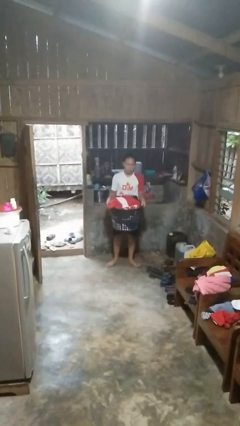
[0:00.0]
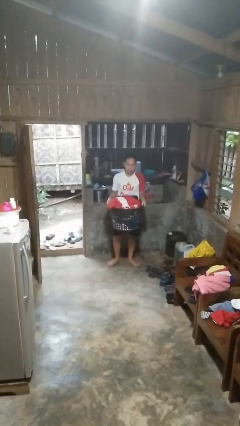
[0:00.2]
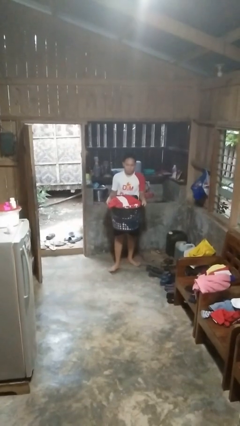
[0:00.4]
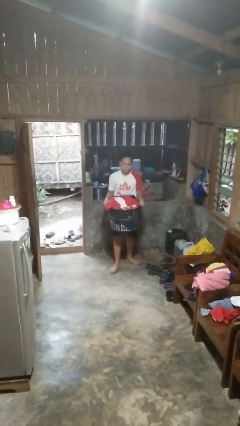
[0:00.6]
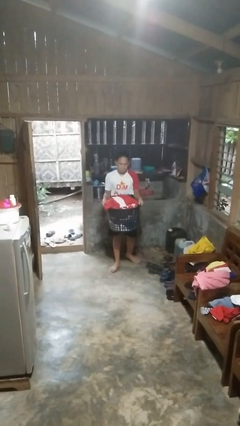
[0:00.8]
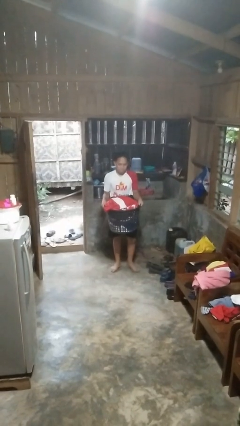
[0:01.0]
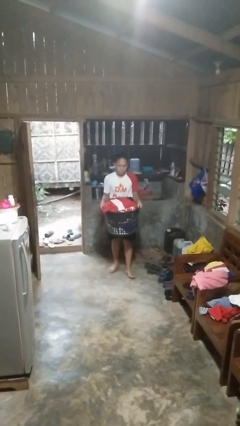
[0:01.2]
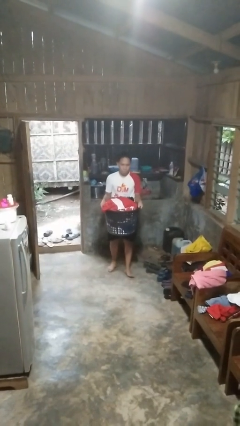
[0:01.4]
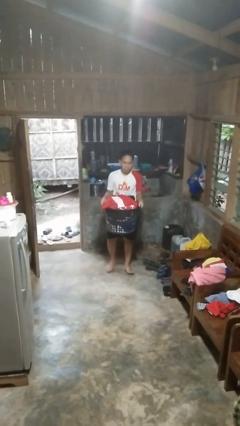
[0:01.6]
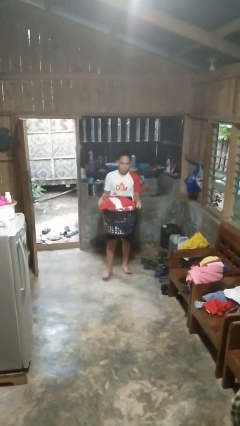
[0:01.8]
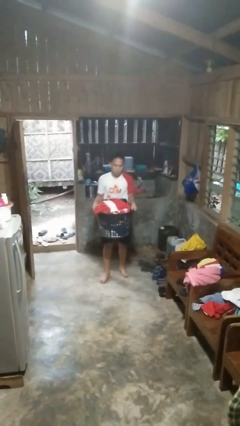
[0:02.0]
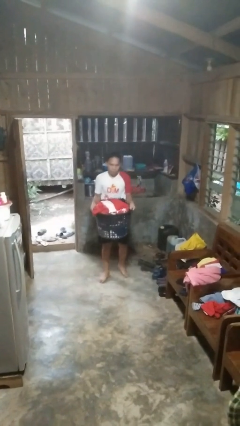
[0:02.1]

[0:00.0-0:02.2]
person carries laundry basket

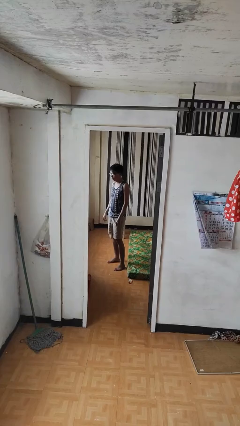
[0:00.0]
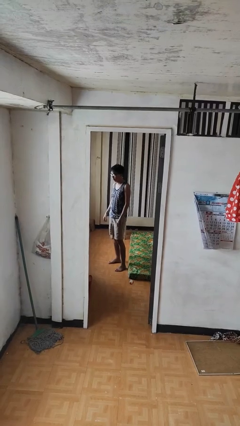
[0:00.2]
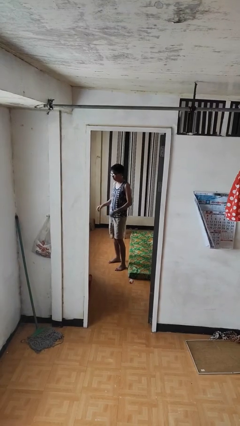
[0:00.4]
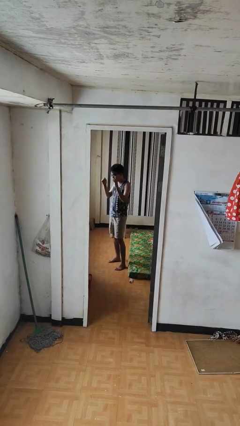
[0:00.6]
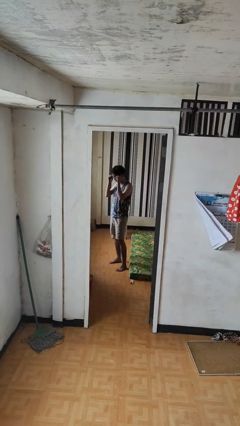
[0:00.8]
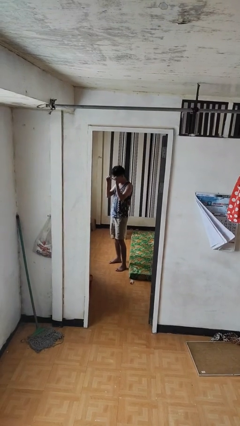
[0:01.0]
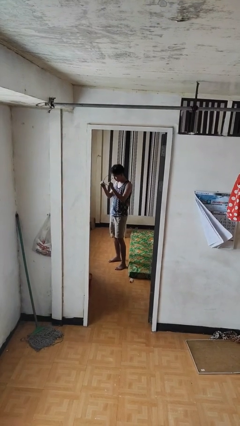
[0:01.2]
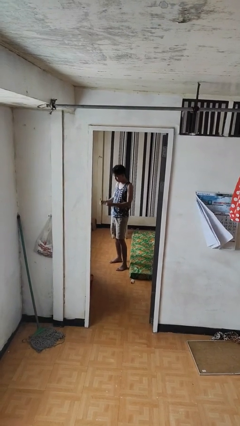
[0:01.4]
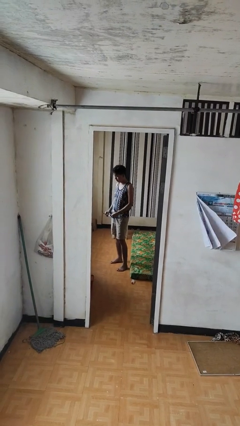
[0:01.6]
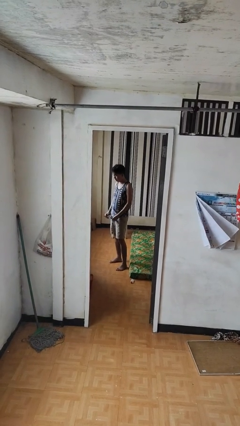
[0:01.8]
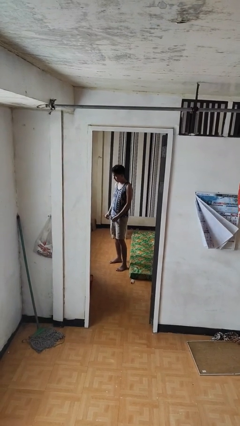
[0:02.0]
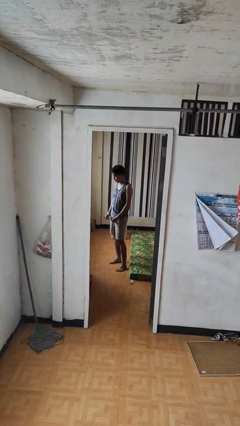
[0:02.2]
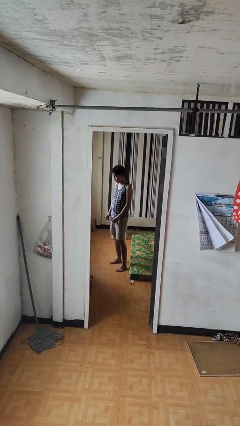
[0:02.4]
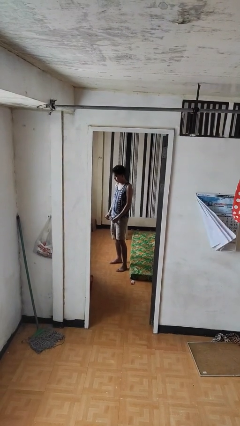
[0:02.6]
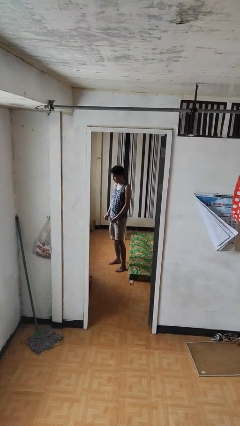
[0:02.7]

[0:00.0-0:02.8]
person takes off glasses

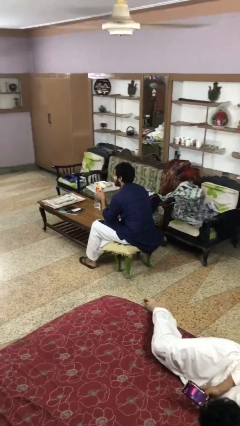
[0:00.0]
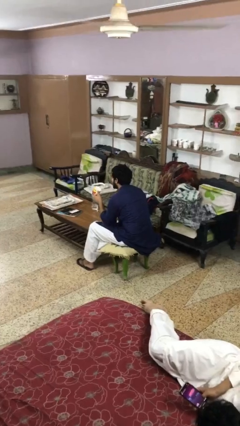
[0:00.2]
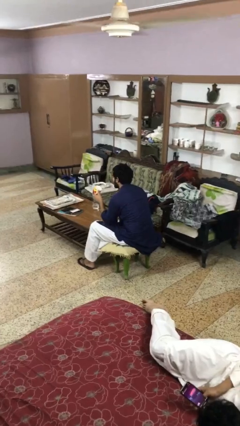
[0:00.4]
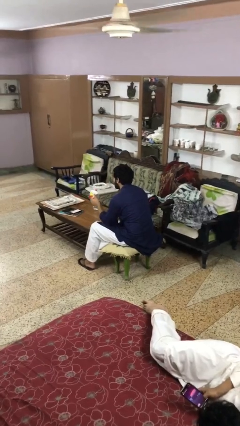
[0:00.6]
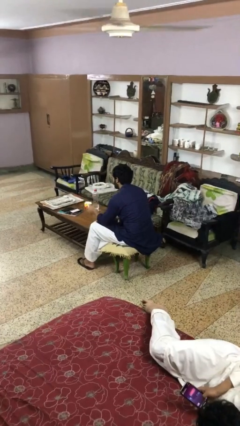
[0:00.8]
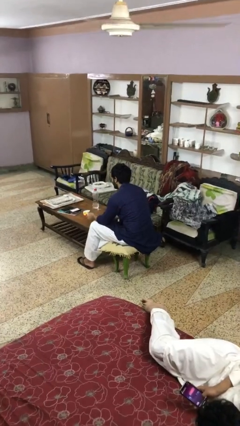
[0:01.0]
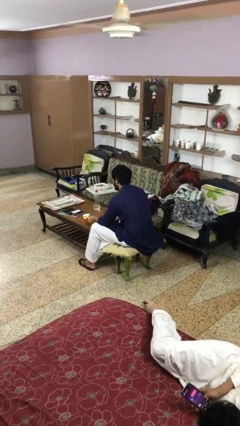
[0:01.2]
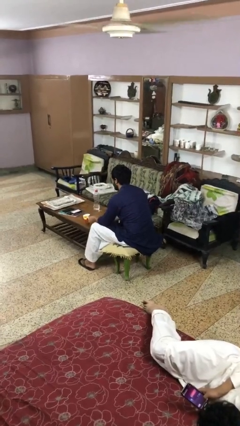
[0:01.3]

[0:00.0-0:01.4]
person puts down object on table

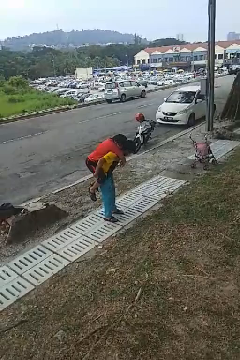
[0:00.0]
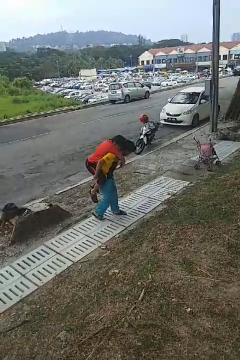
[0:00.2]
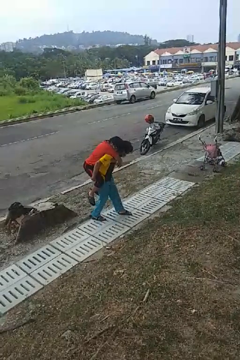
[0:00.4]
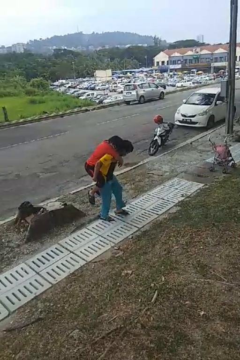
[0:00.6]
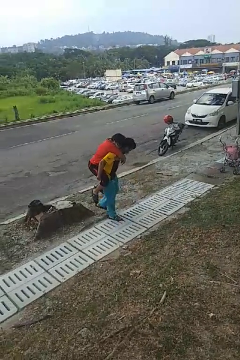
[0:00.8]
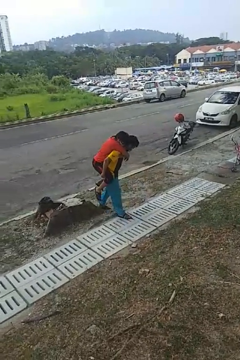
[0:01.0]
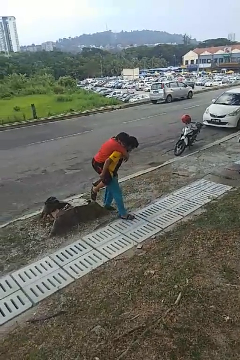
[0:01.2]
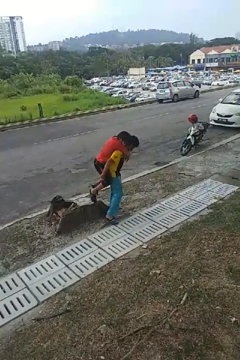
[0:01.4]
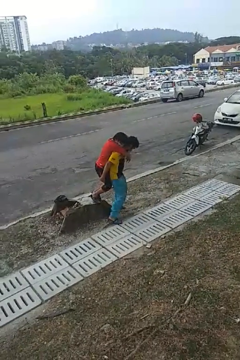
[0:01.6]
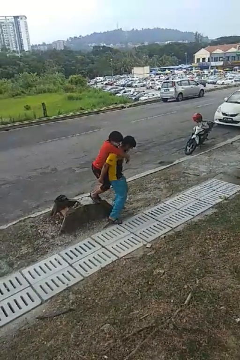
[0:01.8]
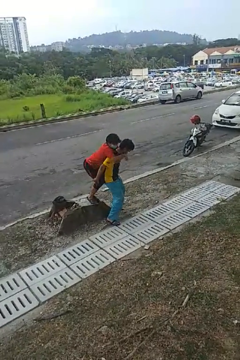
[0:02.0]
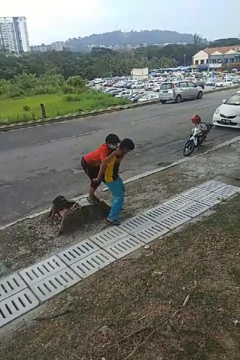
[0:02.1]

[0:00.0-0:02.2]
person puts down person

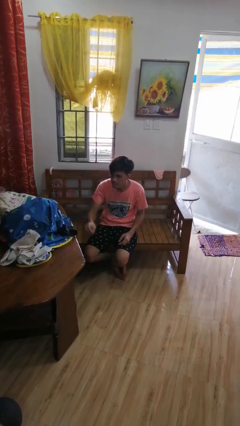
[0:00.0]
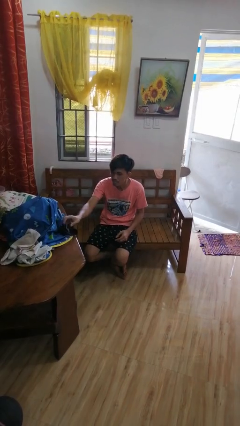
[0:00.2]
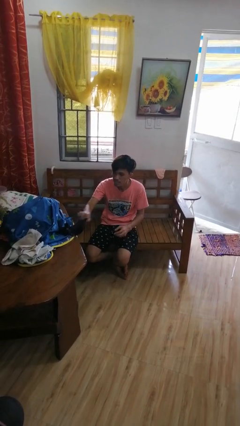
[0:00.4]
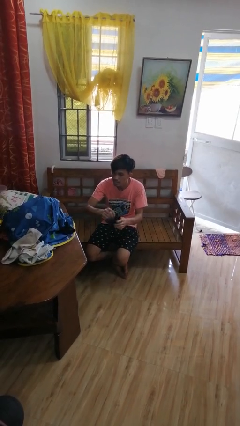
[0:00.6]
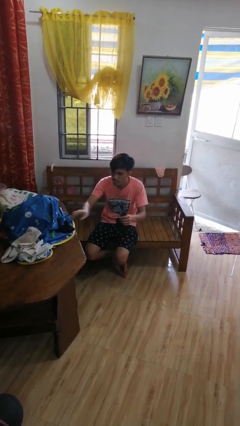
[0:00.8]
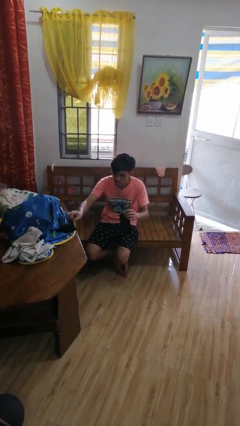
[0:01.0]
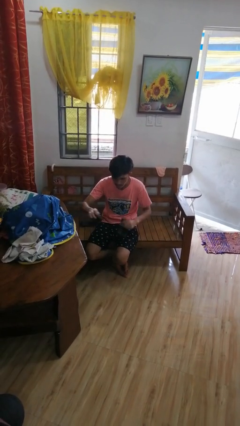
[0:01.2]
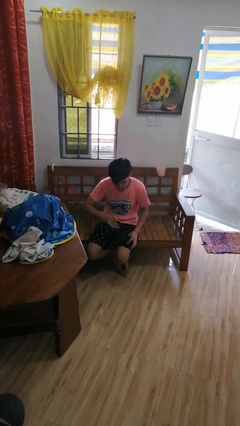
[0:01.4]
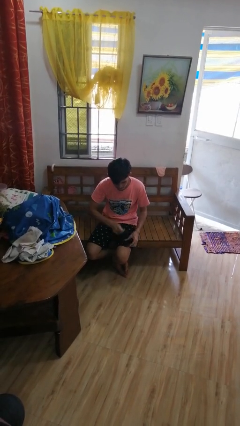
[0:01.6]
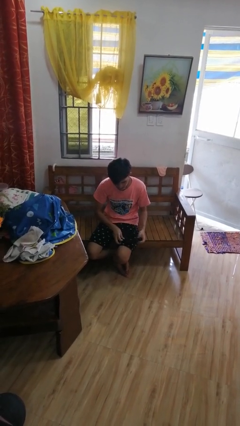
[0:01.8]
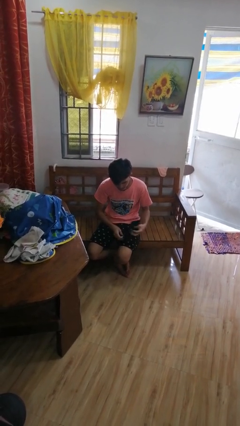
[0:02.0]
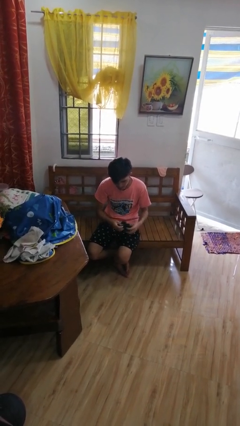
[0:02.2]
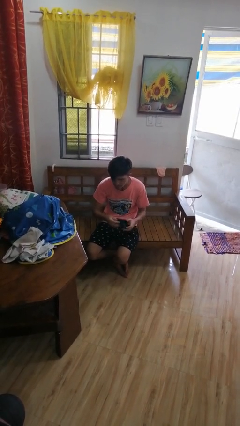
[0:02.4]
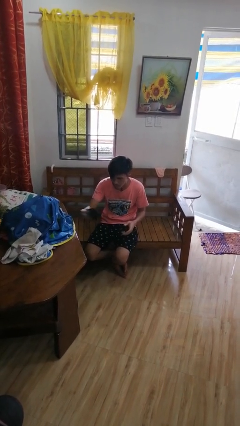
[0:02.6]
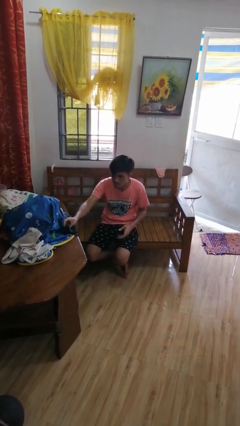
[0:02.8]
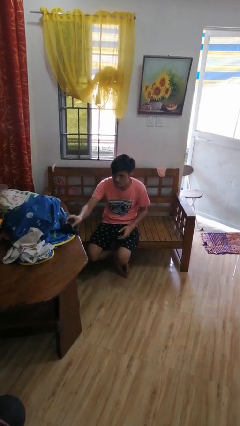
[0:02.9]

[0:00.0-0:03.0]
person folds socks

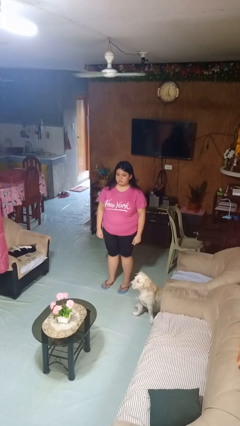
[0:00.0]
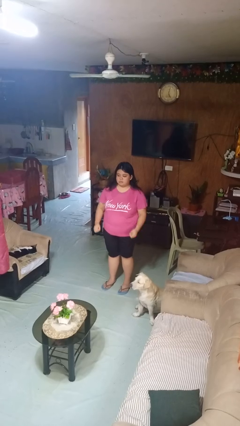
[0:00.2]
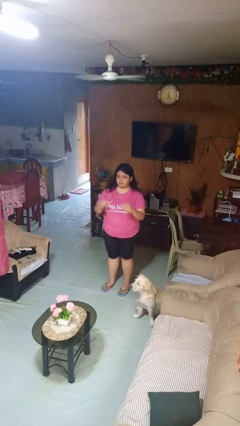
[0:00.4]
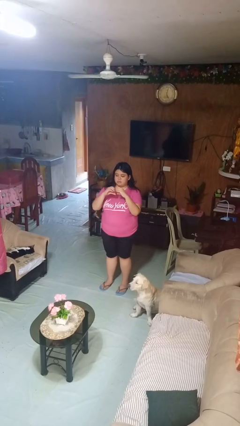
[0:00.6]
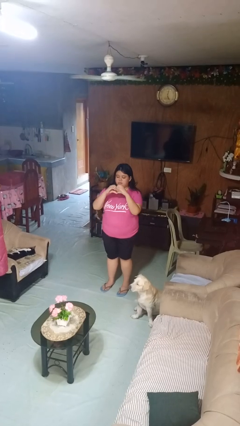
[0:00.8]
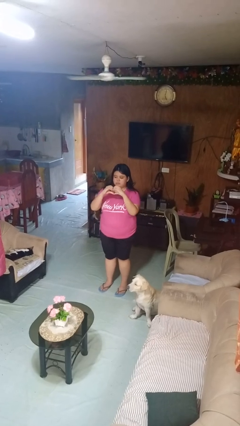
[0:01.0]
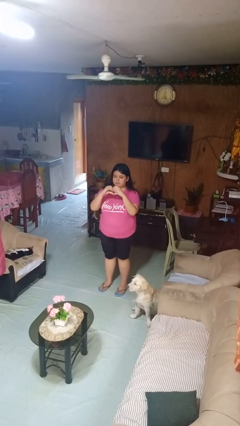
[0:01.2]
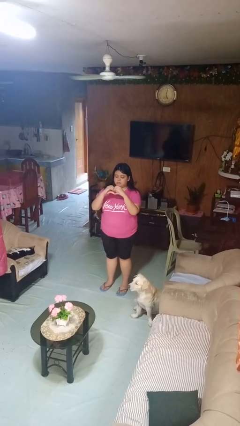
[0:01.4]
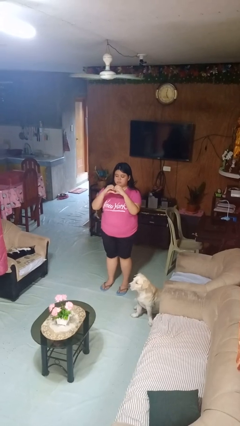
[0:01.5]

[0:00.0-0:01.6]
person gestures heart

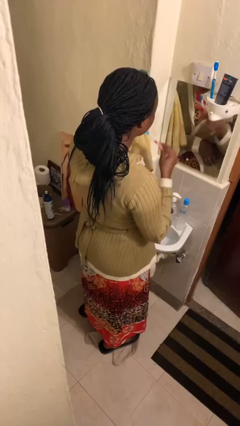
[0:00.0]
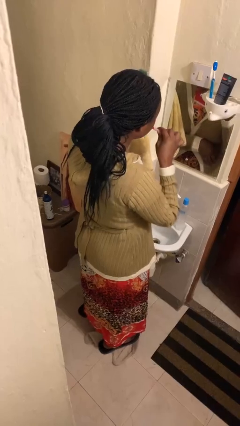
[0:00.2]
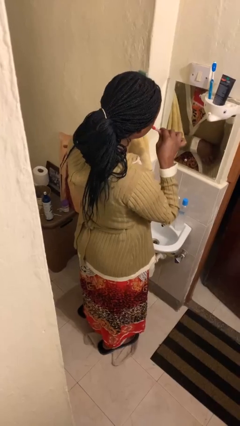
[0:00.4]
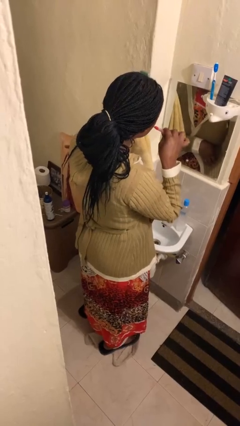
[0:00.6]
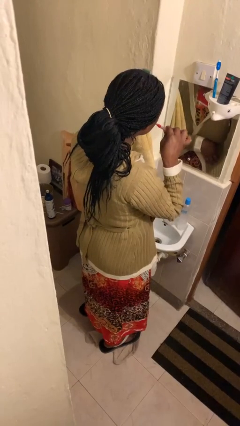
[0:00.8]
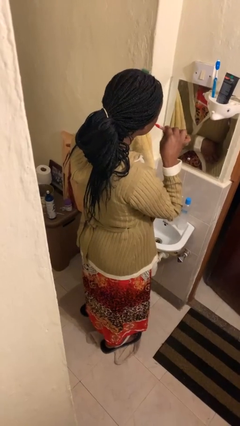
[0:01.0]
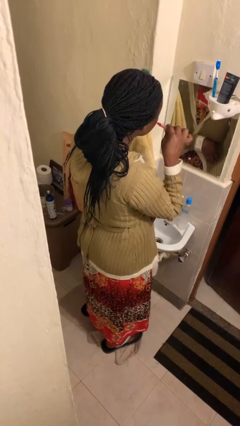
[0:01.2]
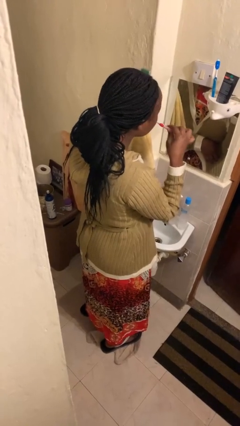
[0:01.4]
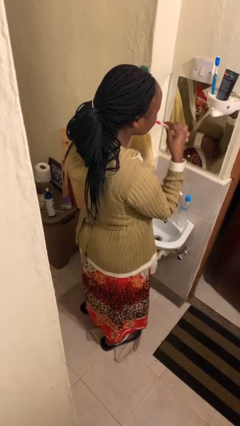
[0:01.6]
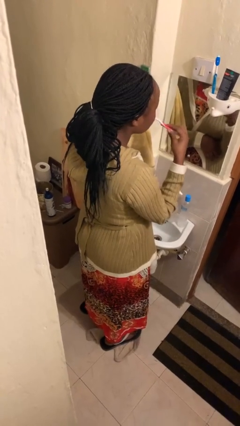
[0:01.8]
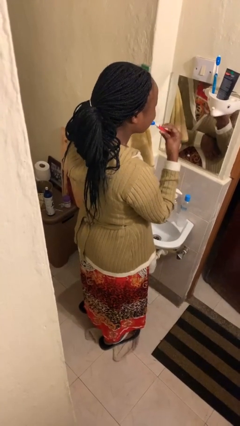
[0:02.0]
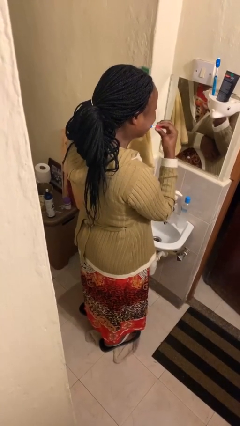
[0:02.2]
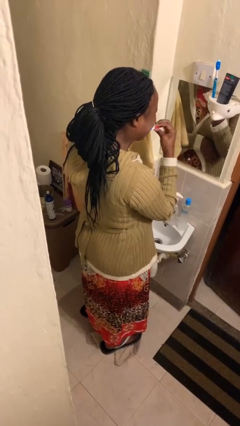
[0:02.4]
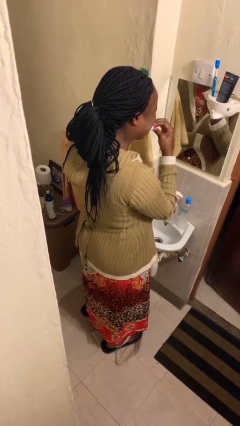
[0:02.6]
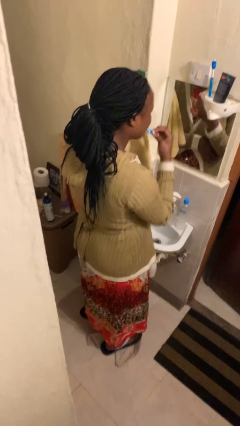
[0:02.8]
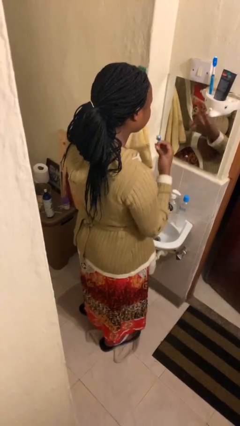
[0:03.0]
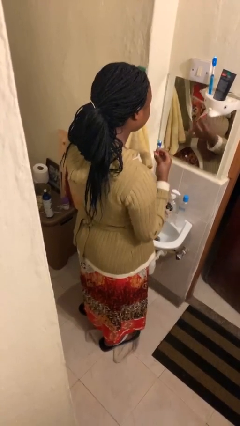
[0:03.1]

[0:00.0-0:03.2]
person brushes teeth

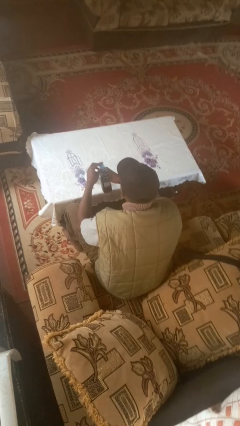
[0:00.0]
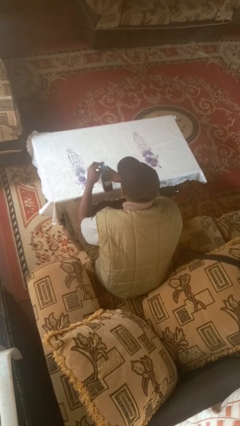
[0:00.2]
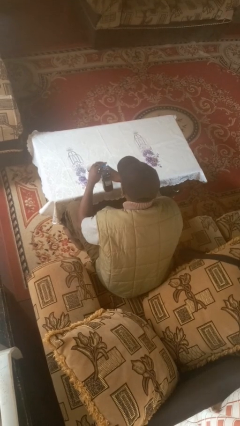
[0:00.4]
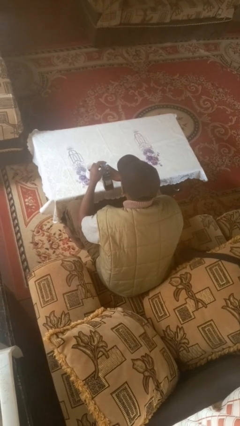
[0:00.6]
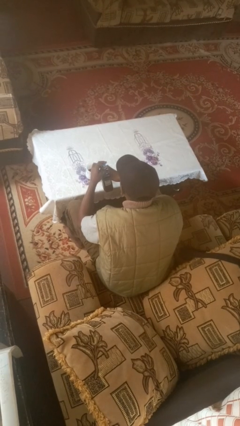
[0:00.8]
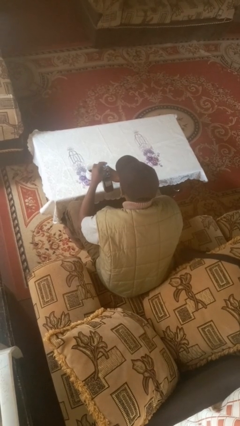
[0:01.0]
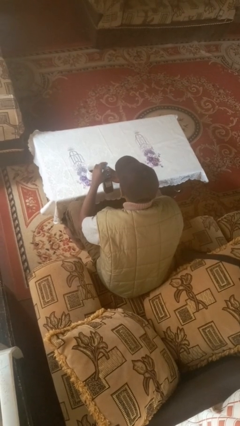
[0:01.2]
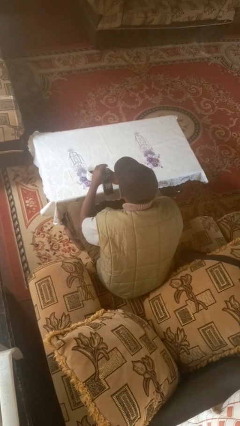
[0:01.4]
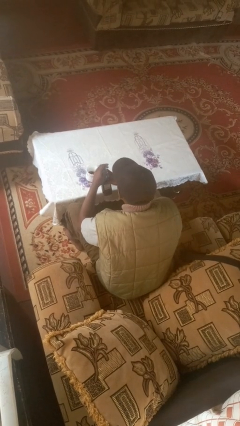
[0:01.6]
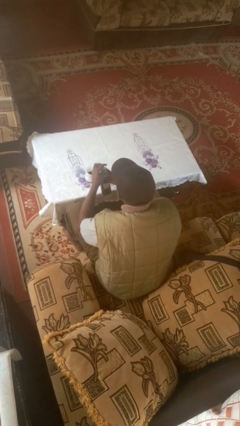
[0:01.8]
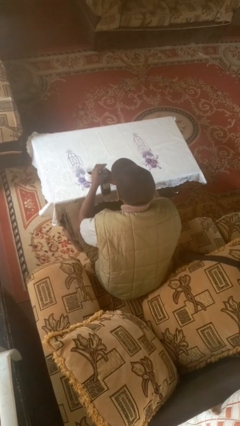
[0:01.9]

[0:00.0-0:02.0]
person screws lid to bottle
